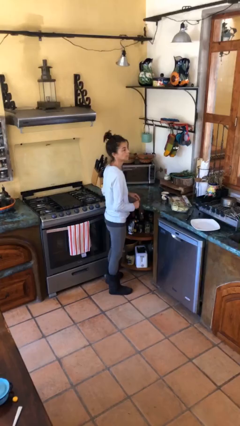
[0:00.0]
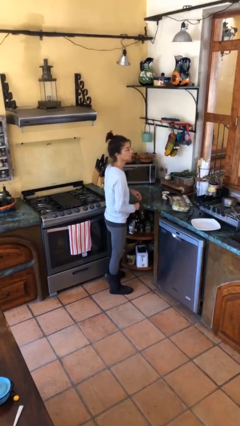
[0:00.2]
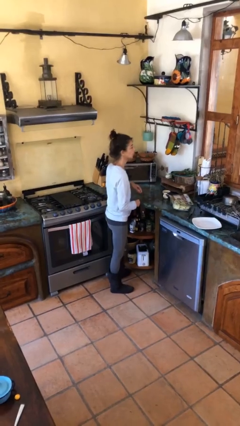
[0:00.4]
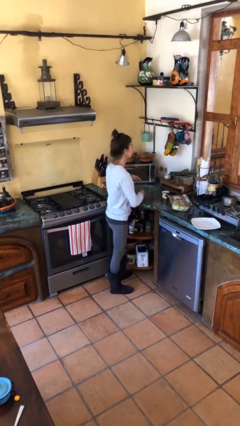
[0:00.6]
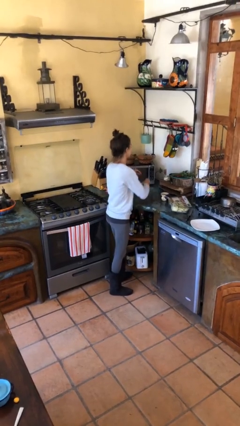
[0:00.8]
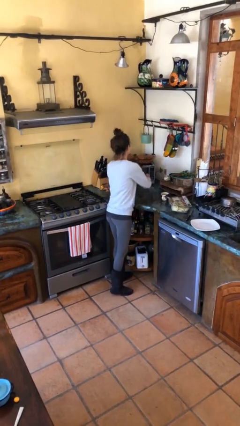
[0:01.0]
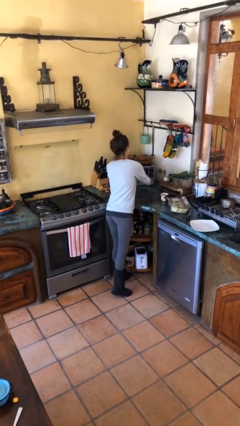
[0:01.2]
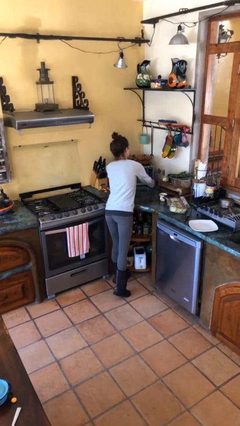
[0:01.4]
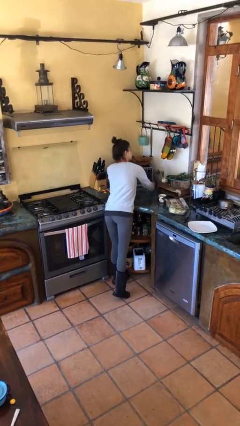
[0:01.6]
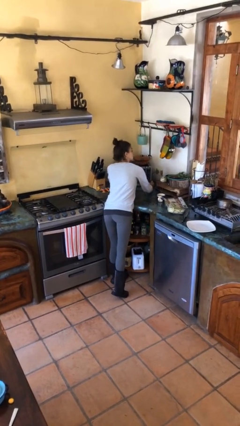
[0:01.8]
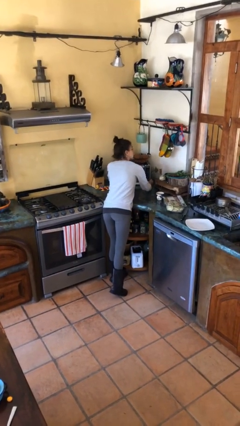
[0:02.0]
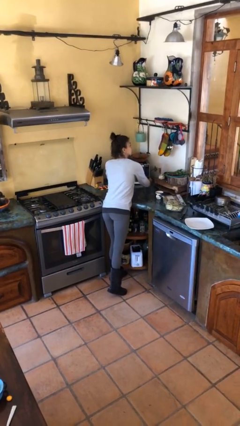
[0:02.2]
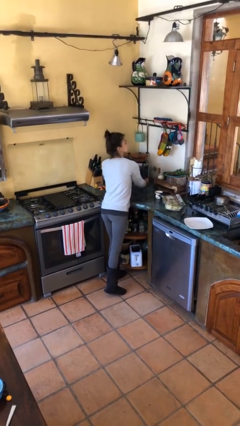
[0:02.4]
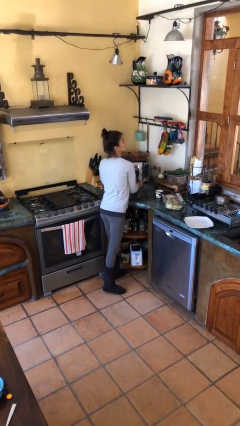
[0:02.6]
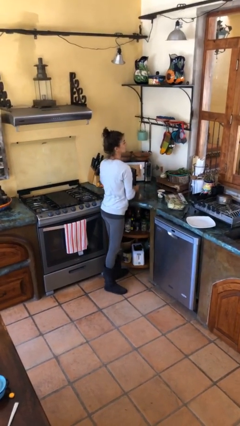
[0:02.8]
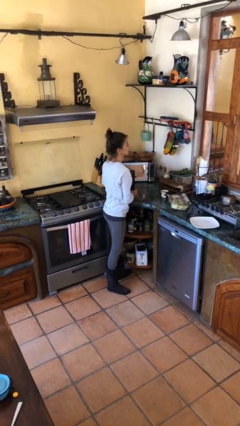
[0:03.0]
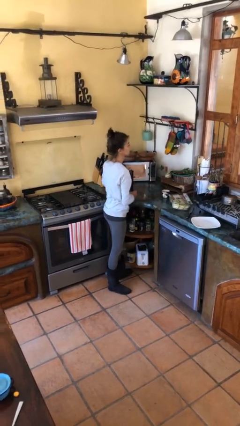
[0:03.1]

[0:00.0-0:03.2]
person opens microwave

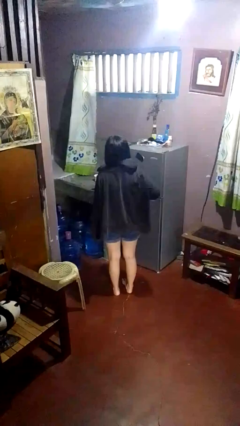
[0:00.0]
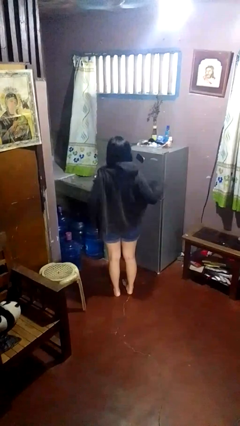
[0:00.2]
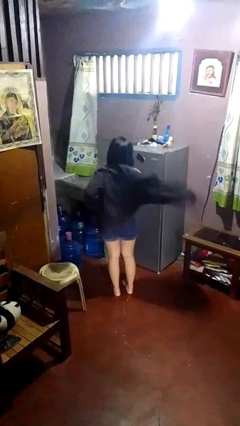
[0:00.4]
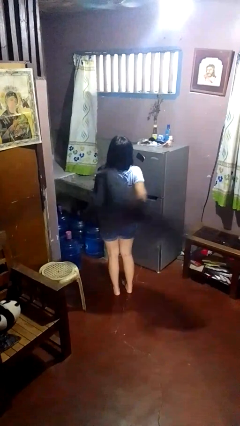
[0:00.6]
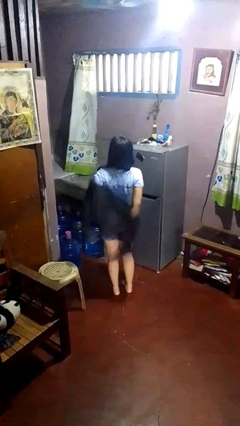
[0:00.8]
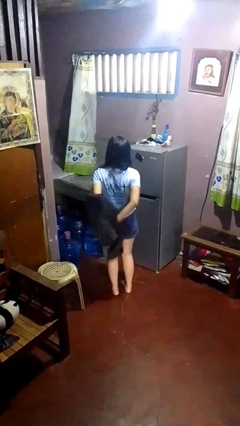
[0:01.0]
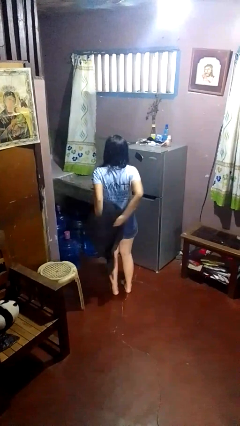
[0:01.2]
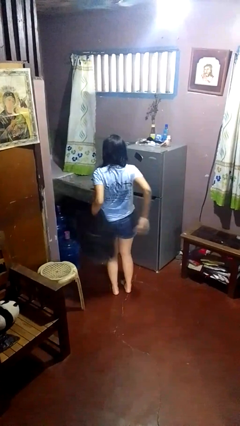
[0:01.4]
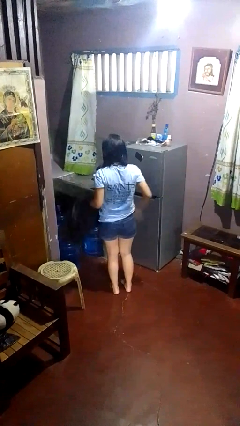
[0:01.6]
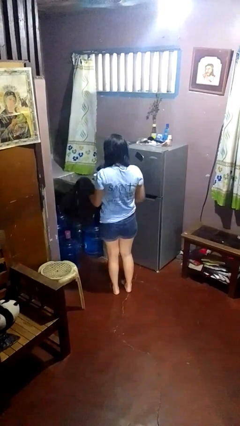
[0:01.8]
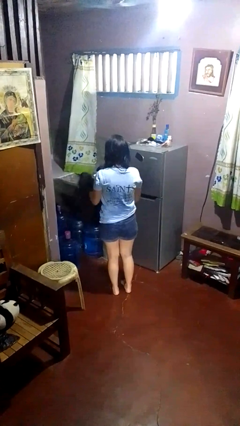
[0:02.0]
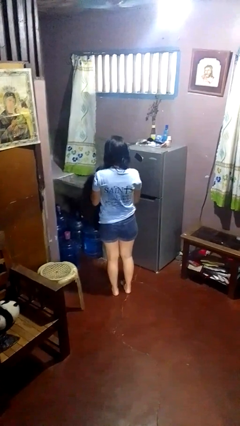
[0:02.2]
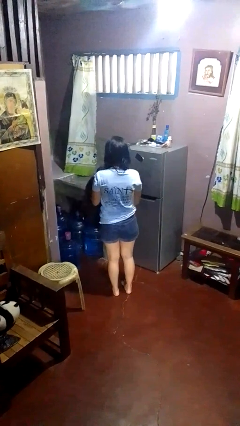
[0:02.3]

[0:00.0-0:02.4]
person takes off jacket

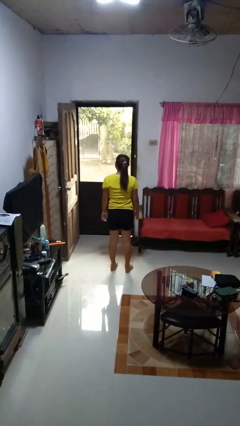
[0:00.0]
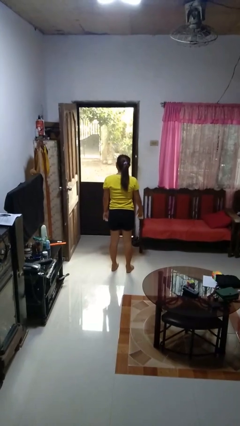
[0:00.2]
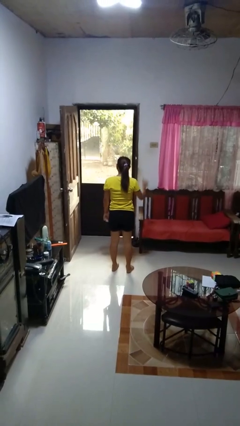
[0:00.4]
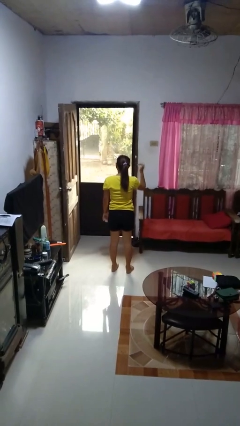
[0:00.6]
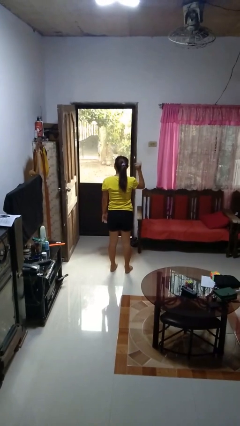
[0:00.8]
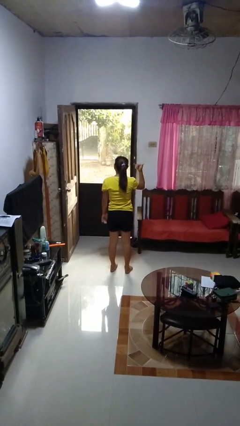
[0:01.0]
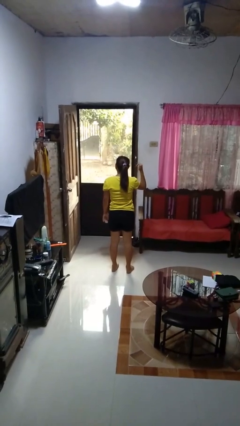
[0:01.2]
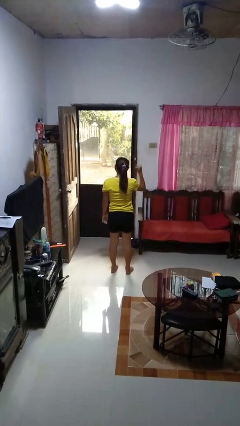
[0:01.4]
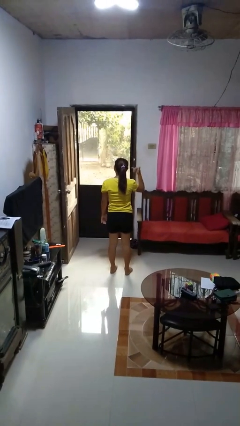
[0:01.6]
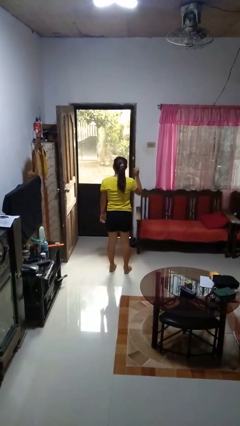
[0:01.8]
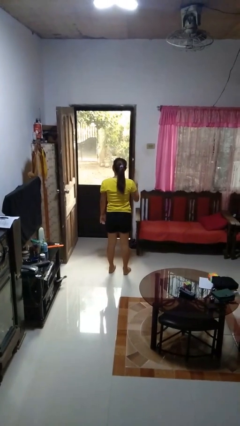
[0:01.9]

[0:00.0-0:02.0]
person gestures hang loose

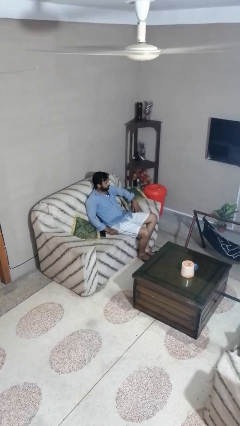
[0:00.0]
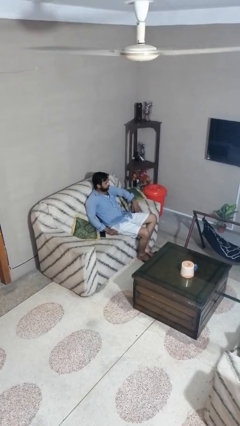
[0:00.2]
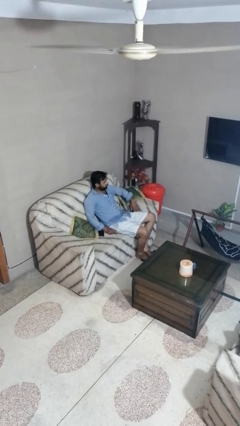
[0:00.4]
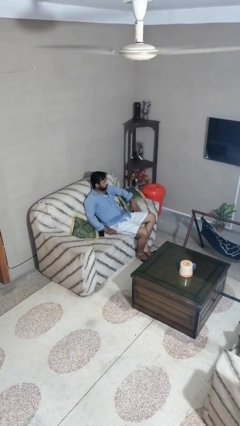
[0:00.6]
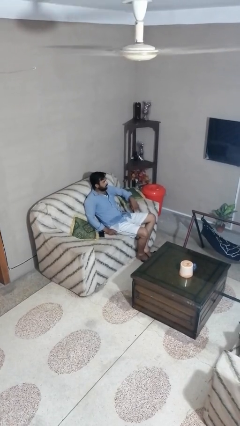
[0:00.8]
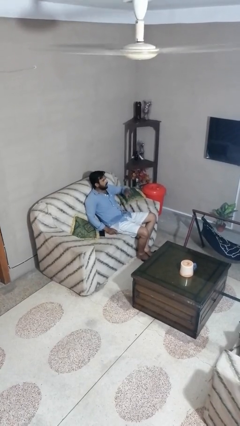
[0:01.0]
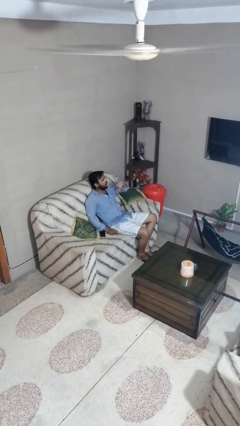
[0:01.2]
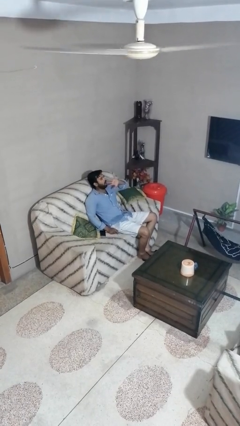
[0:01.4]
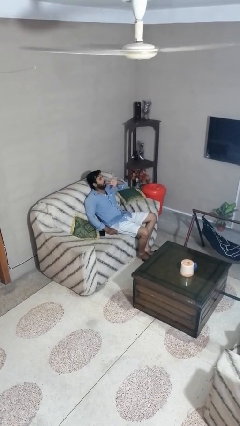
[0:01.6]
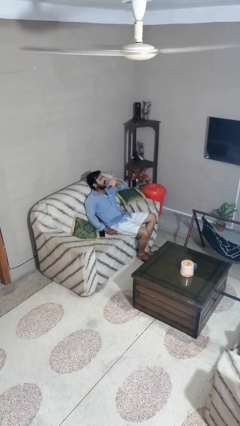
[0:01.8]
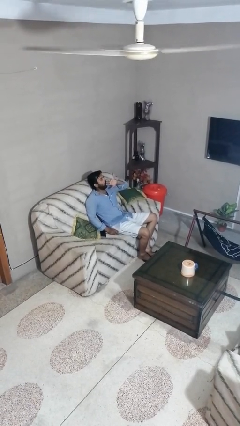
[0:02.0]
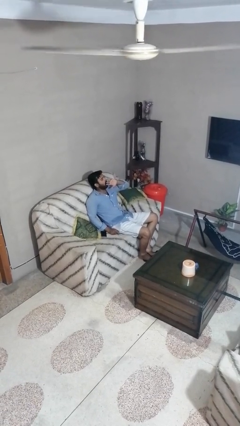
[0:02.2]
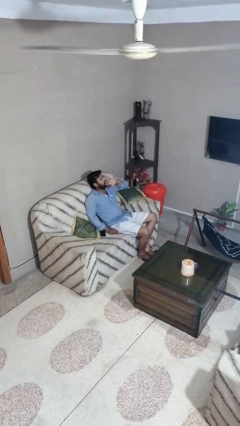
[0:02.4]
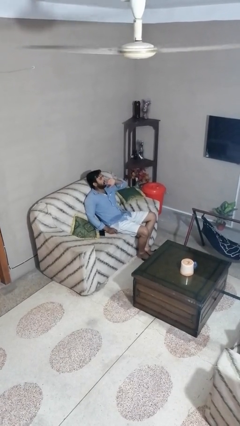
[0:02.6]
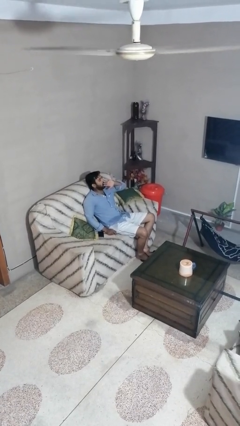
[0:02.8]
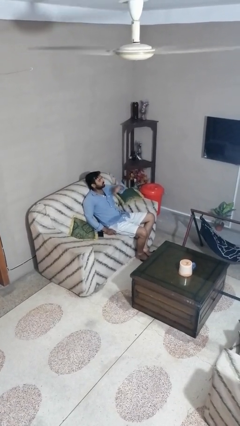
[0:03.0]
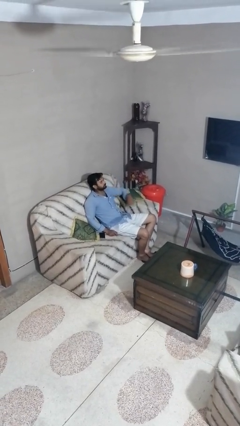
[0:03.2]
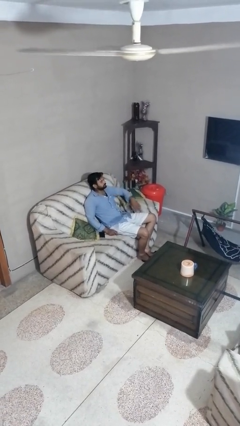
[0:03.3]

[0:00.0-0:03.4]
person yawns

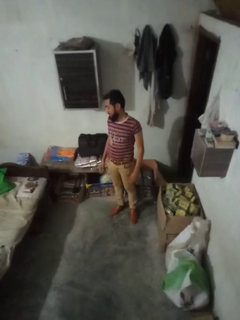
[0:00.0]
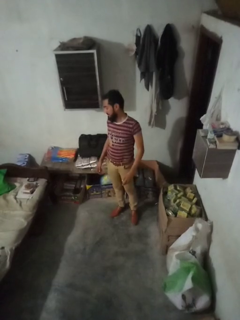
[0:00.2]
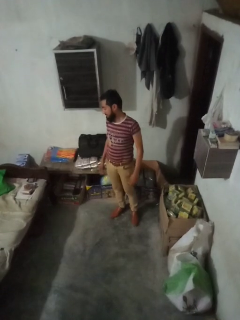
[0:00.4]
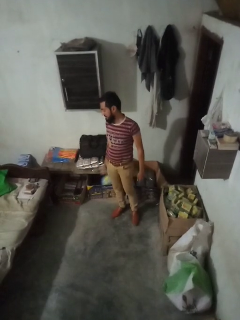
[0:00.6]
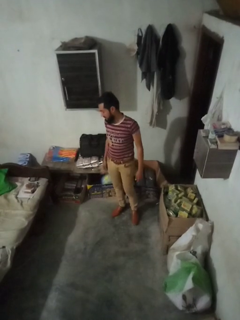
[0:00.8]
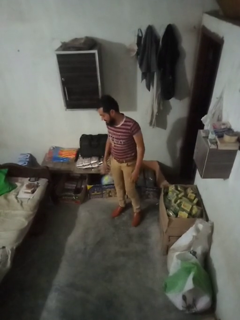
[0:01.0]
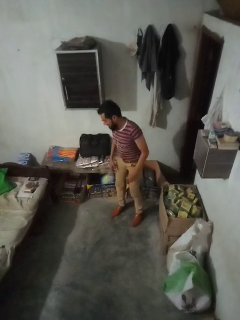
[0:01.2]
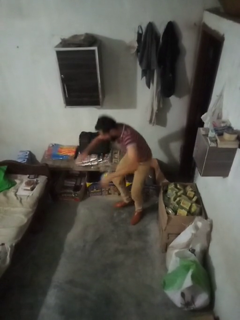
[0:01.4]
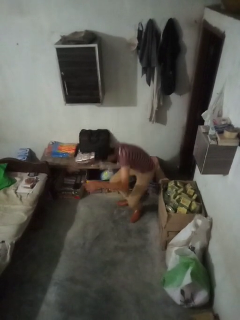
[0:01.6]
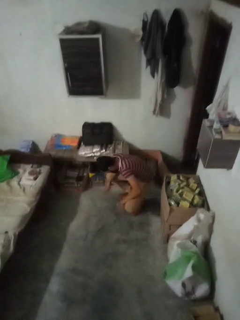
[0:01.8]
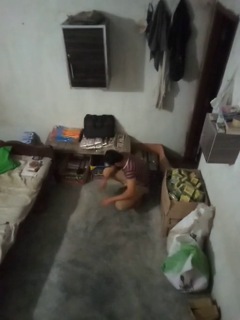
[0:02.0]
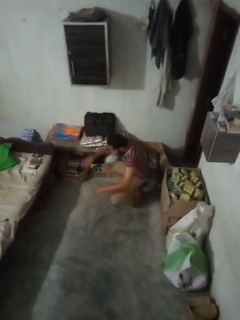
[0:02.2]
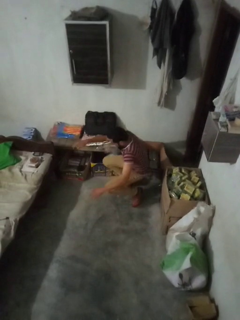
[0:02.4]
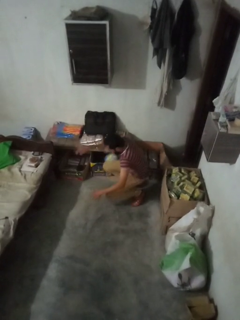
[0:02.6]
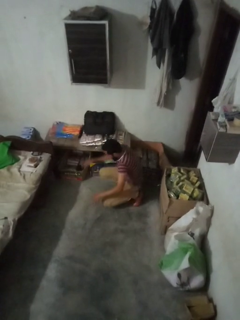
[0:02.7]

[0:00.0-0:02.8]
person trips on object on floor

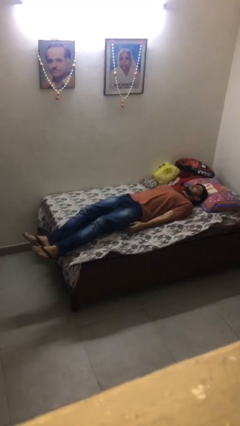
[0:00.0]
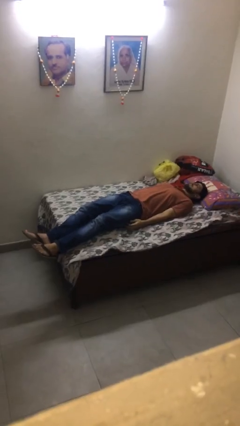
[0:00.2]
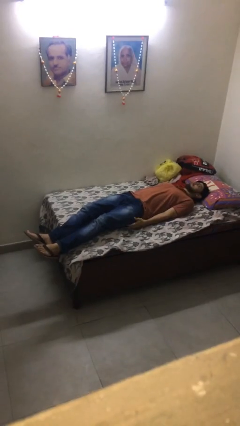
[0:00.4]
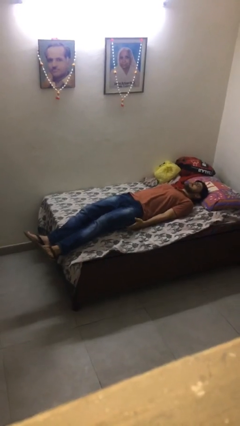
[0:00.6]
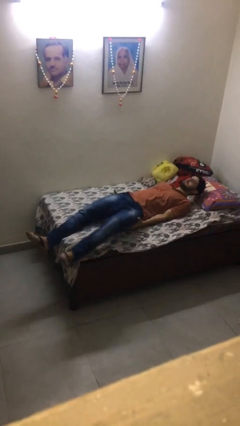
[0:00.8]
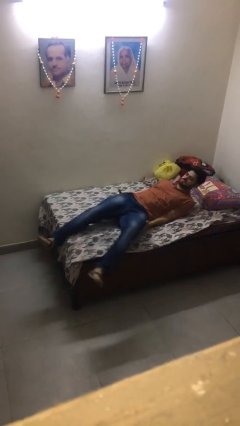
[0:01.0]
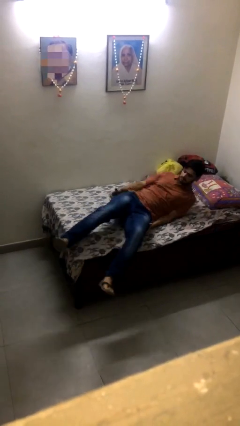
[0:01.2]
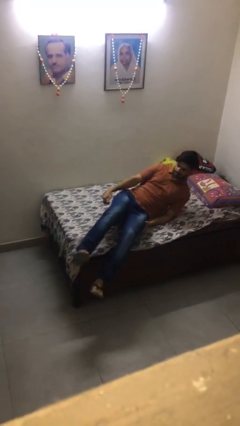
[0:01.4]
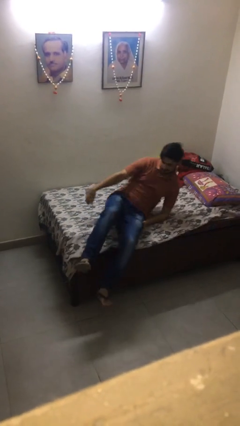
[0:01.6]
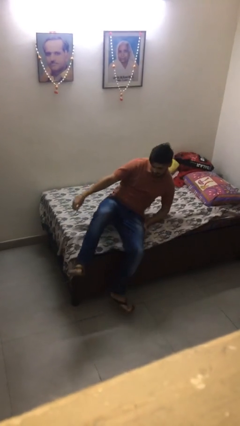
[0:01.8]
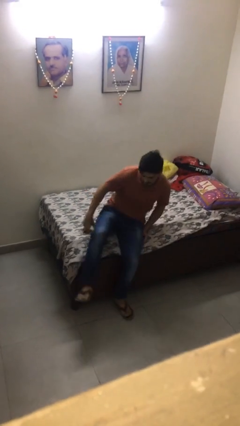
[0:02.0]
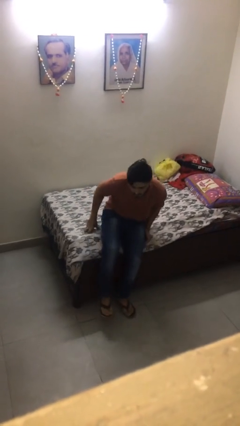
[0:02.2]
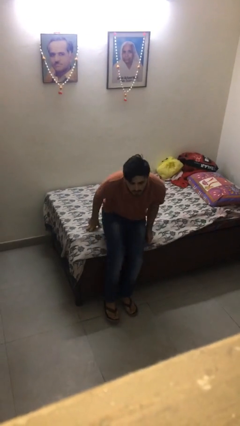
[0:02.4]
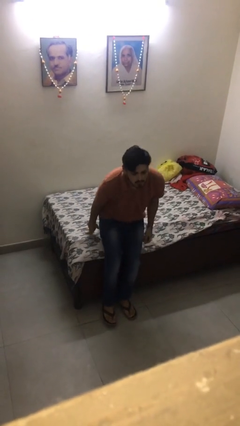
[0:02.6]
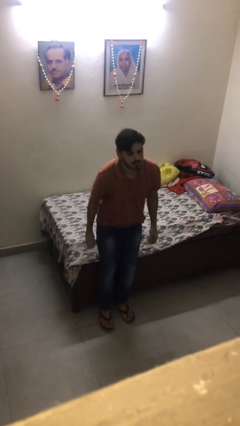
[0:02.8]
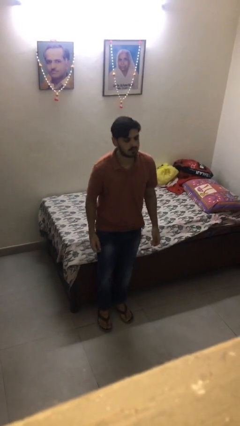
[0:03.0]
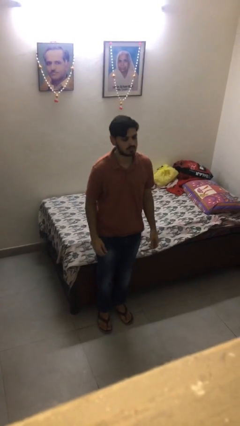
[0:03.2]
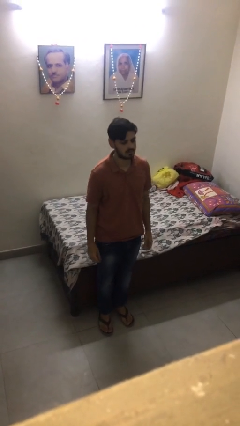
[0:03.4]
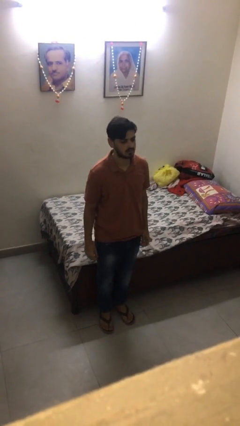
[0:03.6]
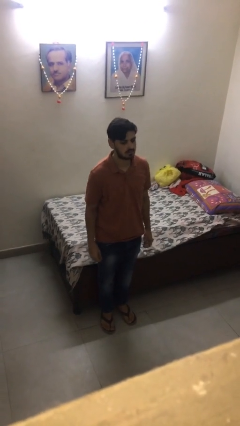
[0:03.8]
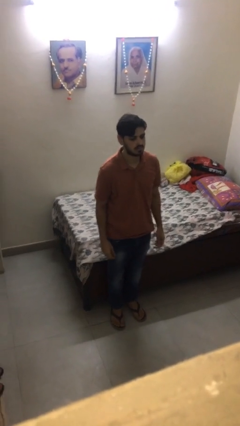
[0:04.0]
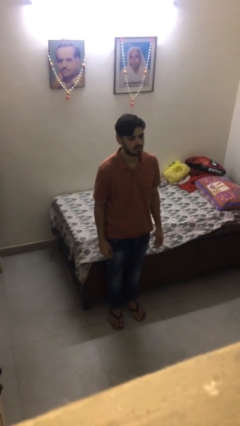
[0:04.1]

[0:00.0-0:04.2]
person stands up

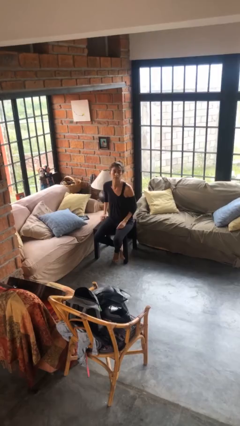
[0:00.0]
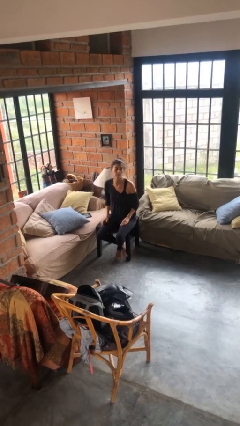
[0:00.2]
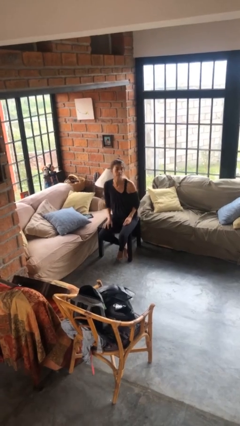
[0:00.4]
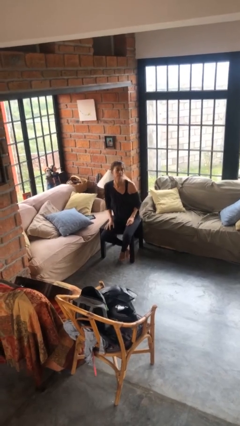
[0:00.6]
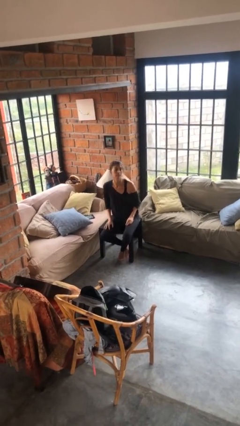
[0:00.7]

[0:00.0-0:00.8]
person puts phone into pocket
